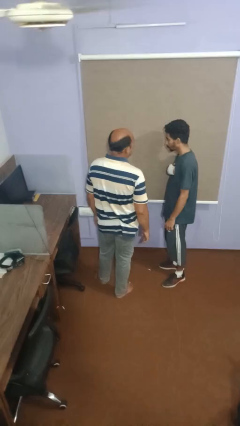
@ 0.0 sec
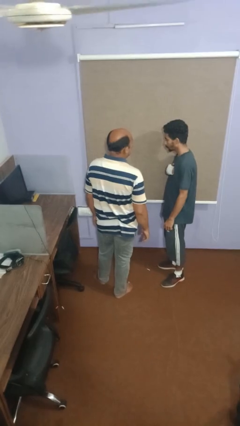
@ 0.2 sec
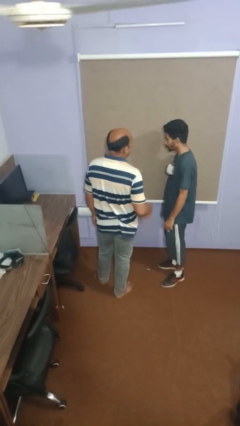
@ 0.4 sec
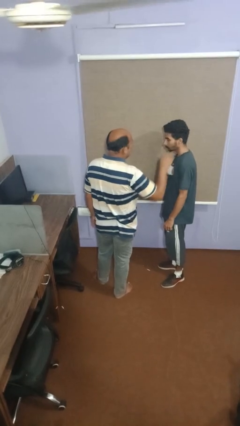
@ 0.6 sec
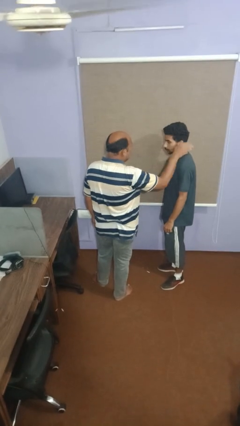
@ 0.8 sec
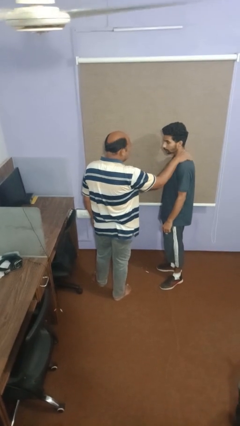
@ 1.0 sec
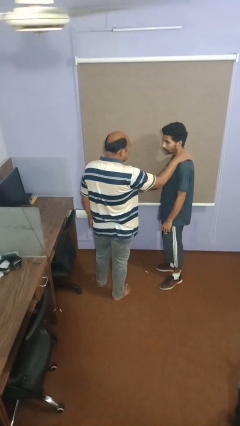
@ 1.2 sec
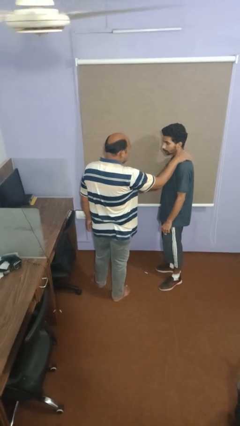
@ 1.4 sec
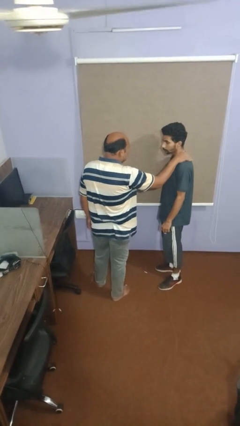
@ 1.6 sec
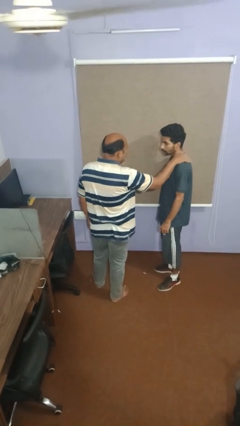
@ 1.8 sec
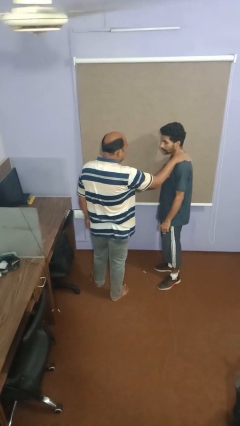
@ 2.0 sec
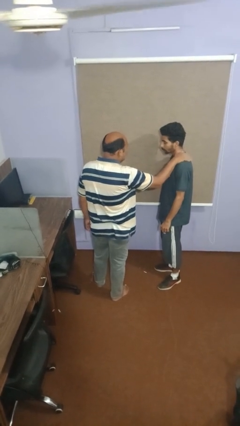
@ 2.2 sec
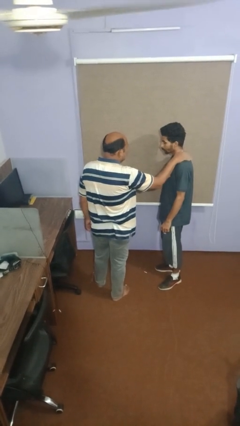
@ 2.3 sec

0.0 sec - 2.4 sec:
person pounds shoulders of person

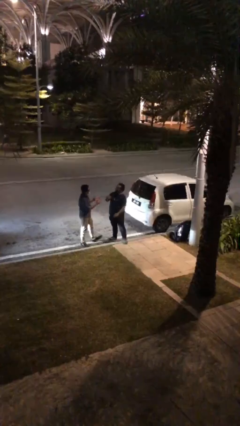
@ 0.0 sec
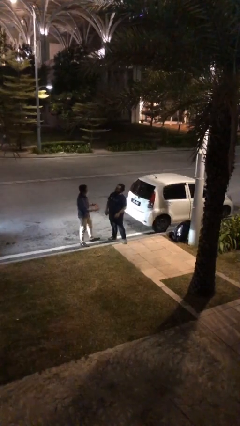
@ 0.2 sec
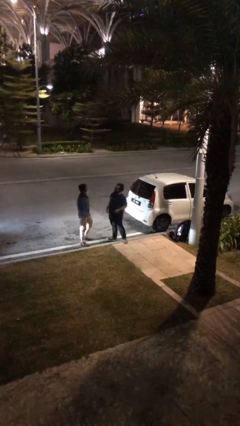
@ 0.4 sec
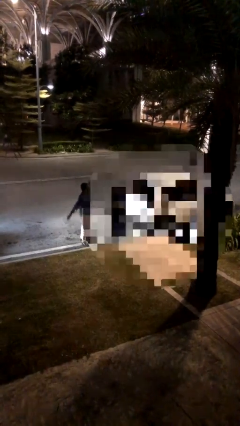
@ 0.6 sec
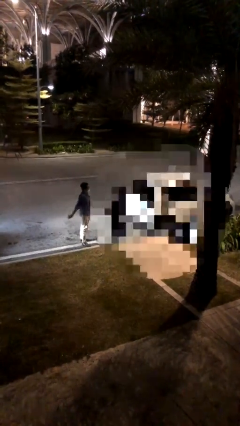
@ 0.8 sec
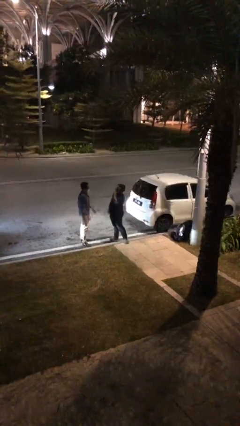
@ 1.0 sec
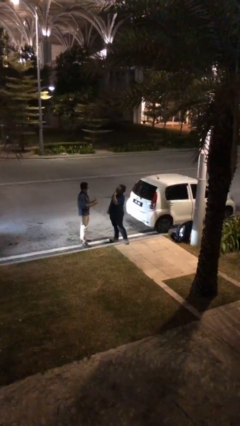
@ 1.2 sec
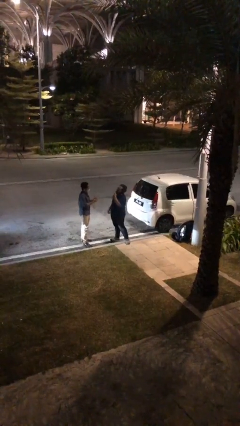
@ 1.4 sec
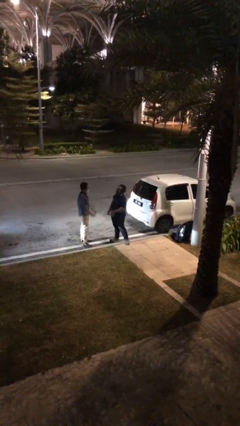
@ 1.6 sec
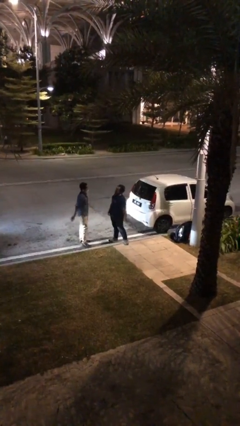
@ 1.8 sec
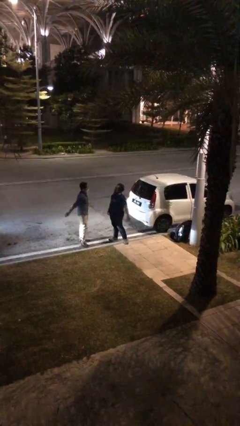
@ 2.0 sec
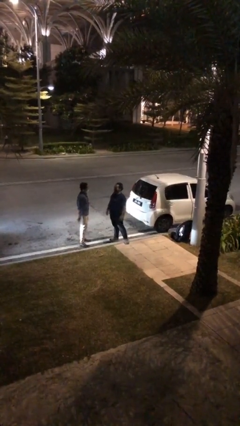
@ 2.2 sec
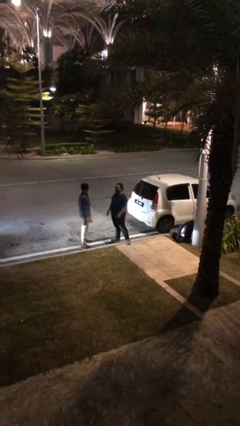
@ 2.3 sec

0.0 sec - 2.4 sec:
person talks to person

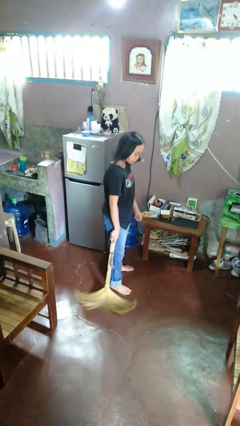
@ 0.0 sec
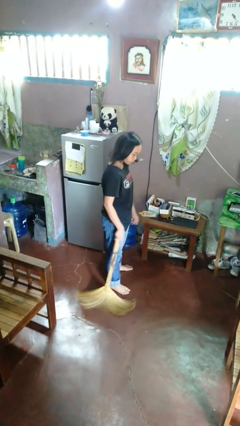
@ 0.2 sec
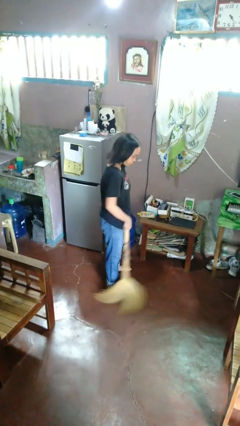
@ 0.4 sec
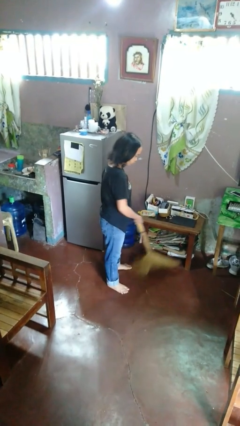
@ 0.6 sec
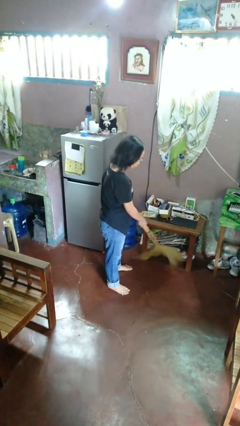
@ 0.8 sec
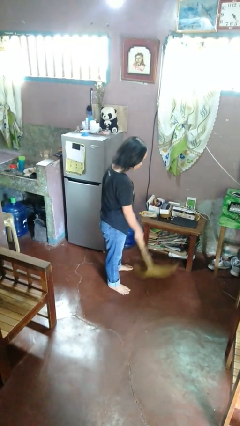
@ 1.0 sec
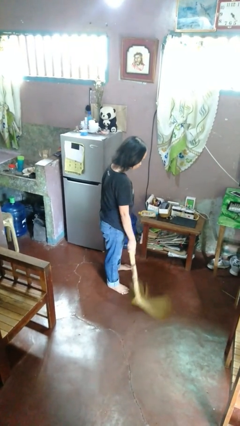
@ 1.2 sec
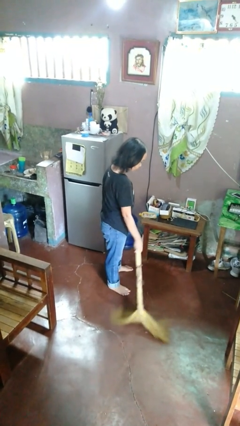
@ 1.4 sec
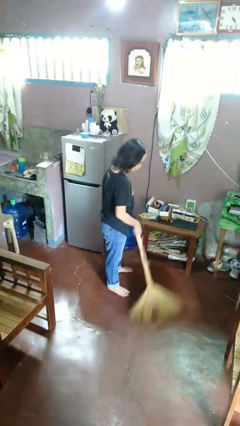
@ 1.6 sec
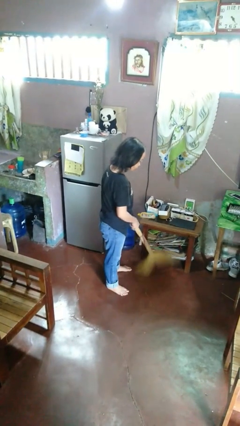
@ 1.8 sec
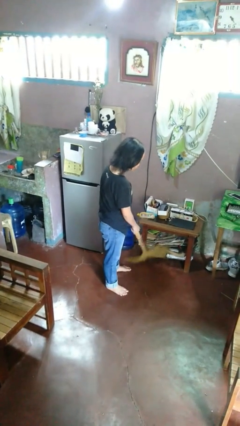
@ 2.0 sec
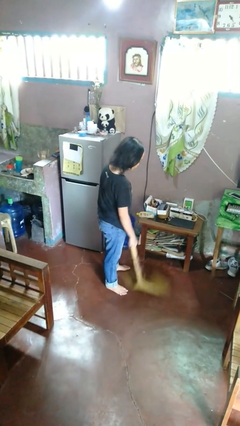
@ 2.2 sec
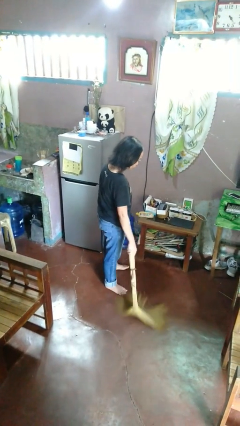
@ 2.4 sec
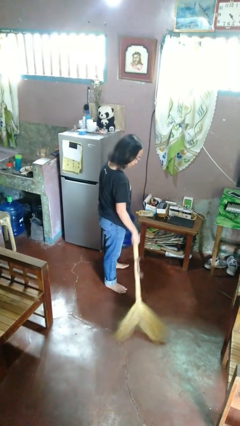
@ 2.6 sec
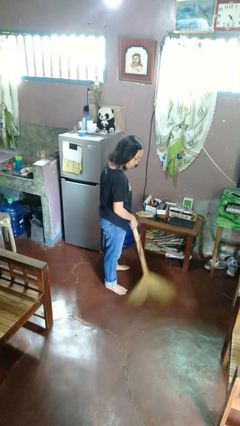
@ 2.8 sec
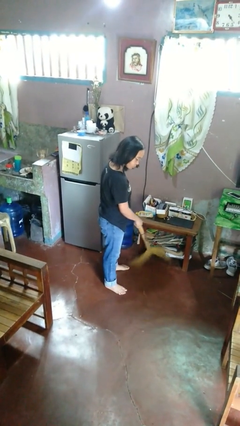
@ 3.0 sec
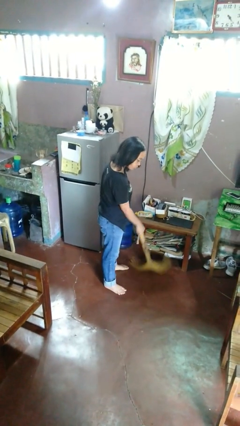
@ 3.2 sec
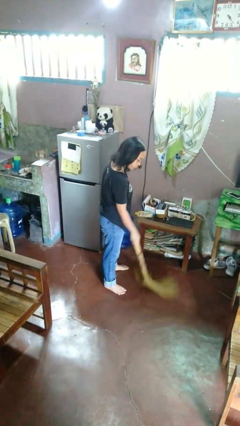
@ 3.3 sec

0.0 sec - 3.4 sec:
person sweeps floor

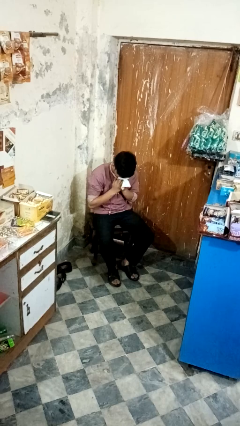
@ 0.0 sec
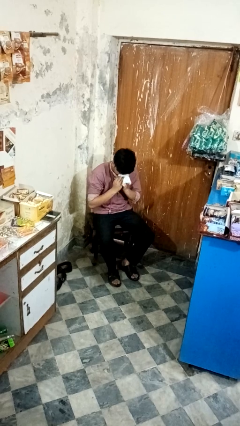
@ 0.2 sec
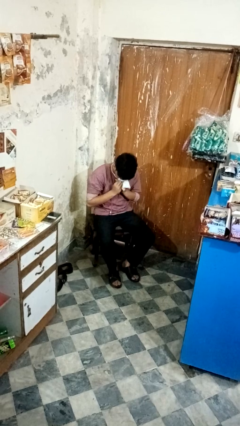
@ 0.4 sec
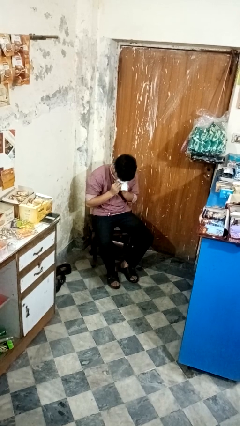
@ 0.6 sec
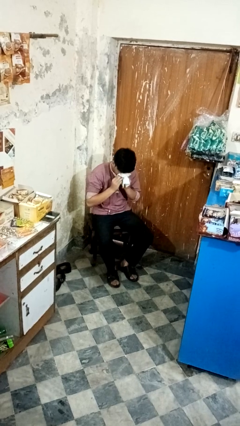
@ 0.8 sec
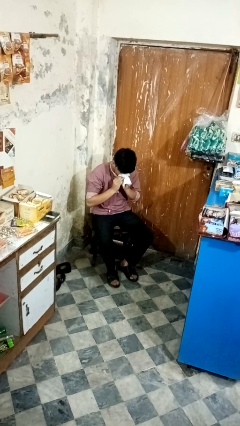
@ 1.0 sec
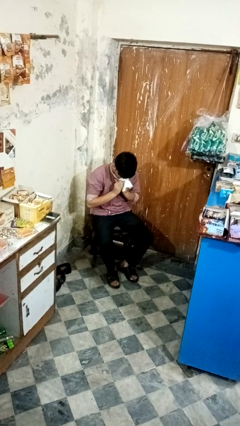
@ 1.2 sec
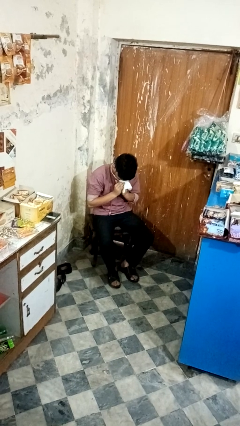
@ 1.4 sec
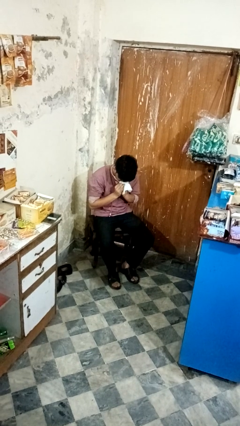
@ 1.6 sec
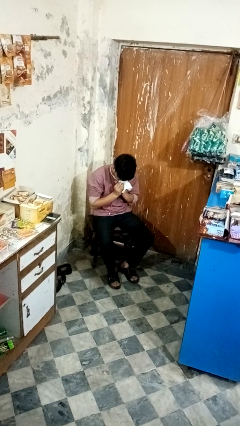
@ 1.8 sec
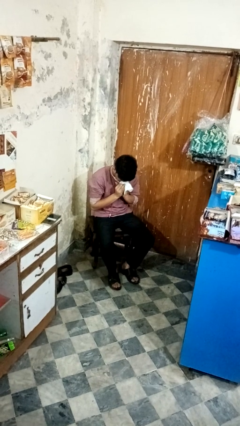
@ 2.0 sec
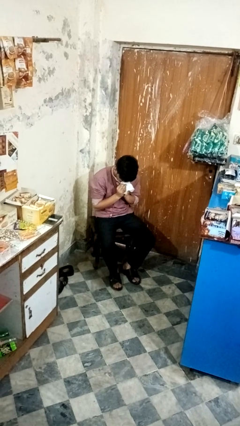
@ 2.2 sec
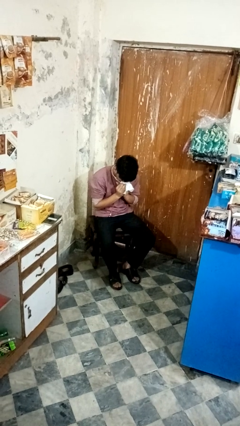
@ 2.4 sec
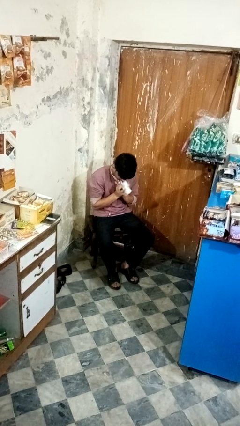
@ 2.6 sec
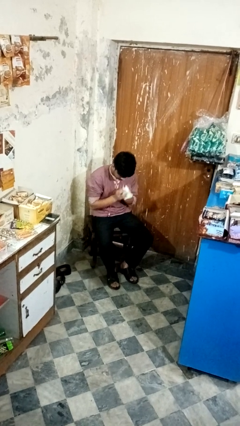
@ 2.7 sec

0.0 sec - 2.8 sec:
person blows nose

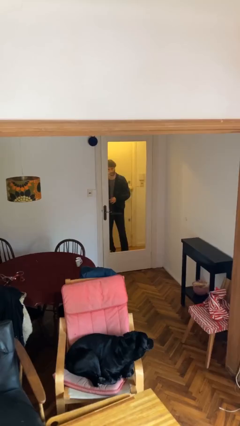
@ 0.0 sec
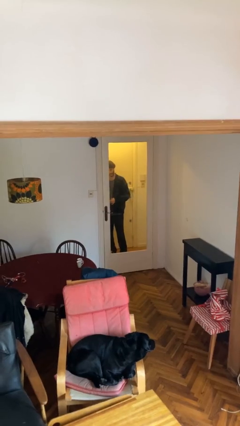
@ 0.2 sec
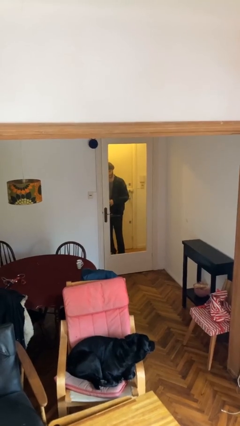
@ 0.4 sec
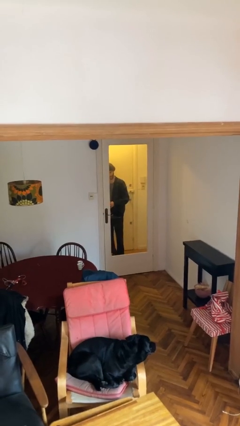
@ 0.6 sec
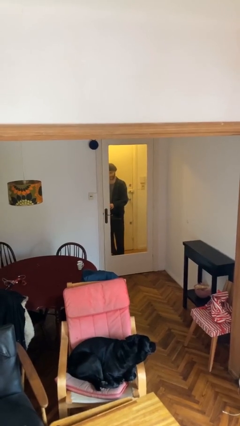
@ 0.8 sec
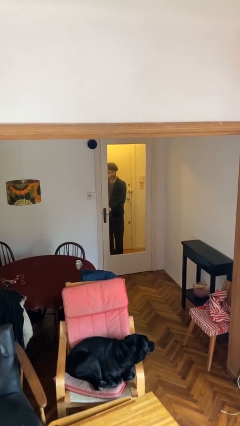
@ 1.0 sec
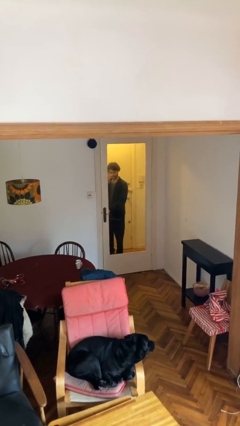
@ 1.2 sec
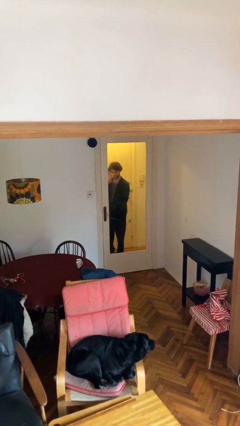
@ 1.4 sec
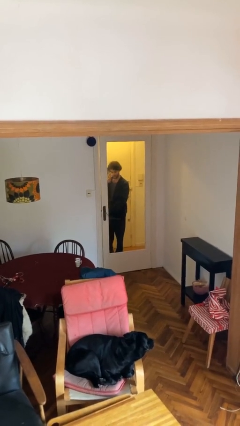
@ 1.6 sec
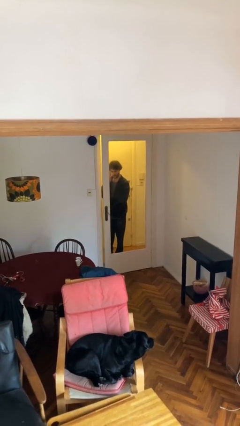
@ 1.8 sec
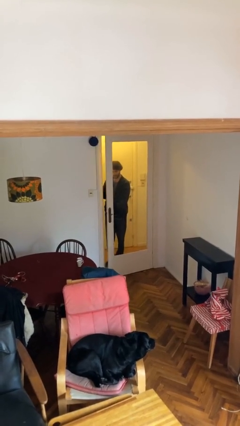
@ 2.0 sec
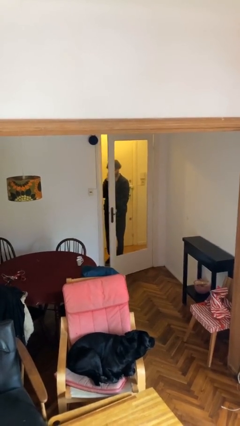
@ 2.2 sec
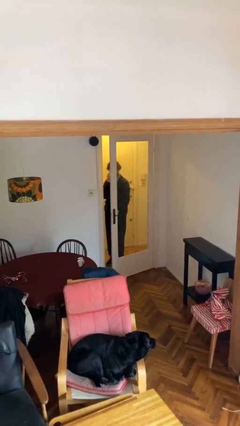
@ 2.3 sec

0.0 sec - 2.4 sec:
person opens facility door

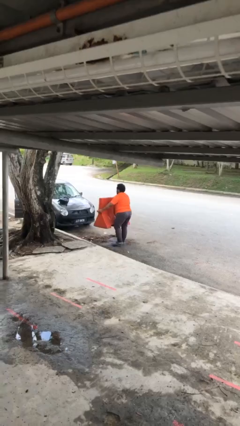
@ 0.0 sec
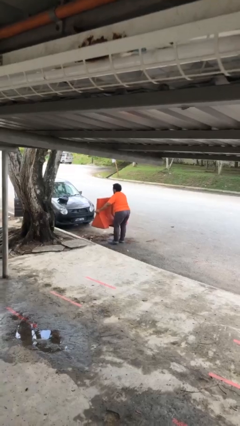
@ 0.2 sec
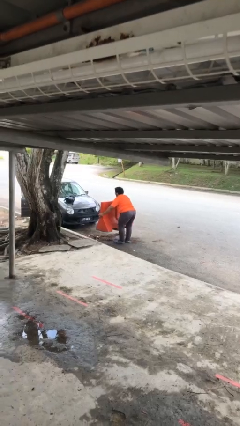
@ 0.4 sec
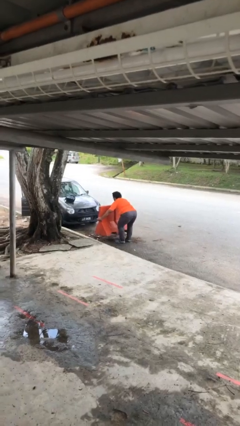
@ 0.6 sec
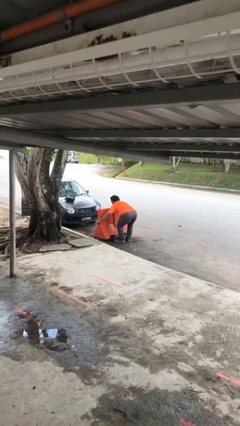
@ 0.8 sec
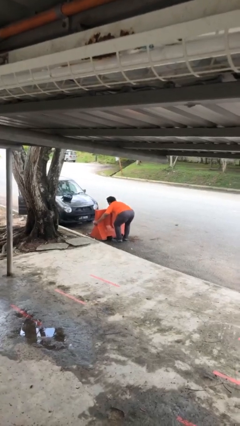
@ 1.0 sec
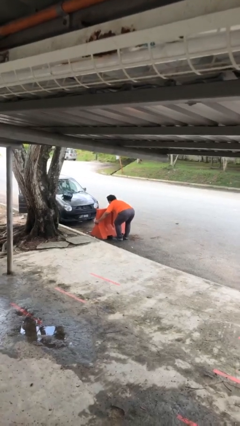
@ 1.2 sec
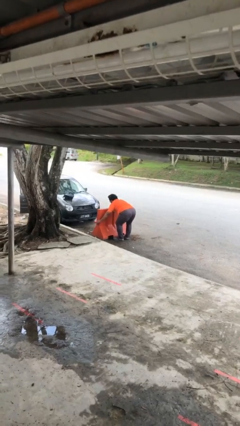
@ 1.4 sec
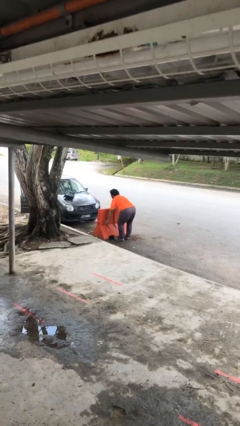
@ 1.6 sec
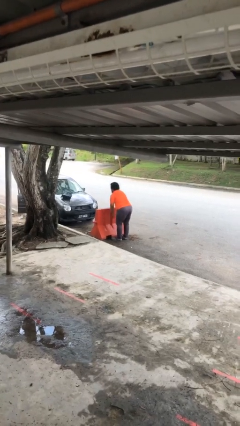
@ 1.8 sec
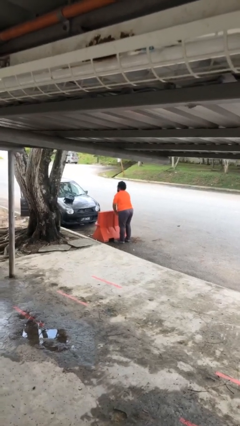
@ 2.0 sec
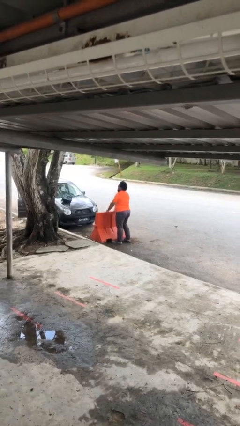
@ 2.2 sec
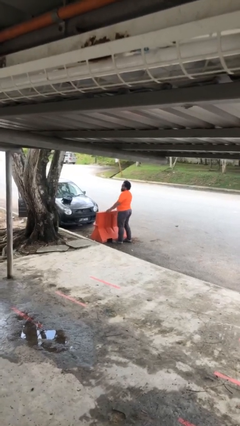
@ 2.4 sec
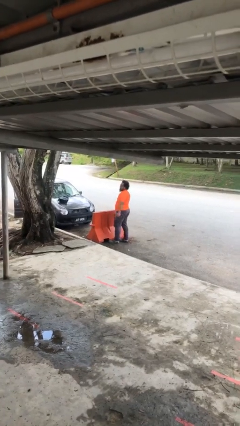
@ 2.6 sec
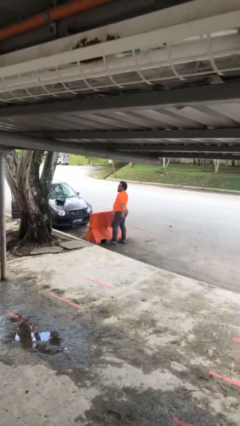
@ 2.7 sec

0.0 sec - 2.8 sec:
person puts down object on floor

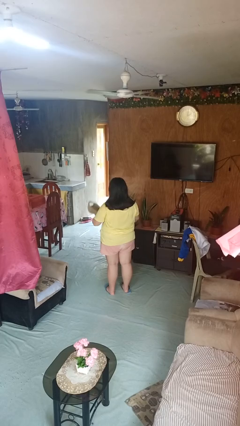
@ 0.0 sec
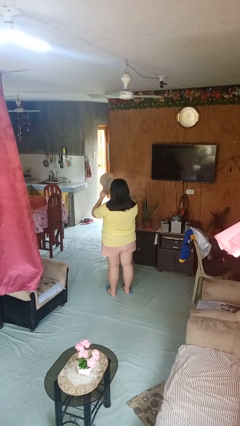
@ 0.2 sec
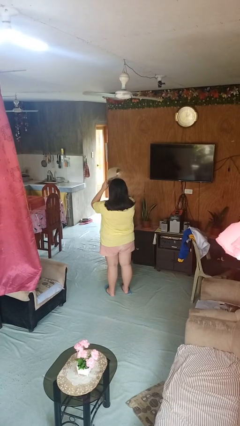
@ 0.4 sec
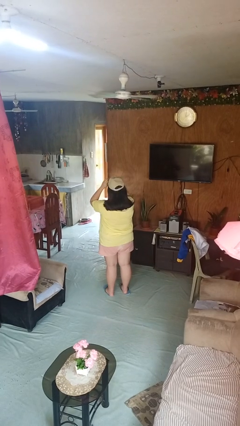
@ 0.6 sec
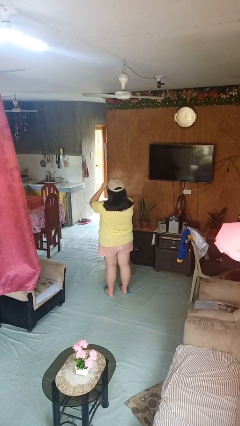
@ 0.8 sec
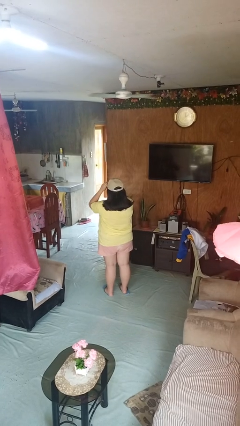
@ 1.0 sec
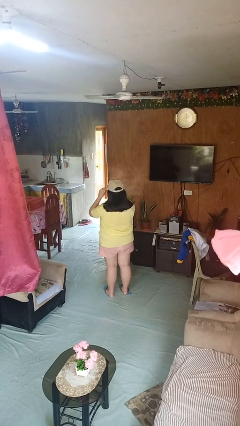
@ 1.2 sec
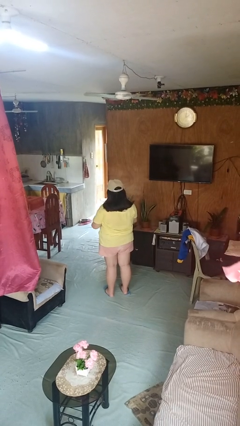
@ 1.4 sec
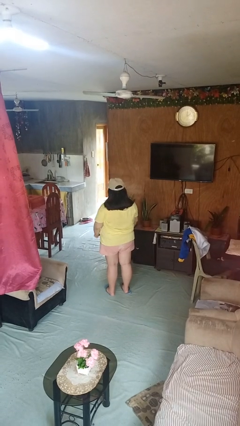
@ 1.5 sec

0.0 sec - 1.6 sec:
person puts on hat
